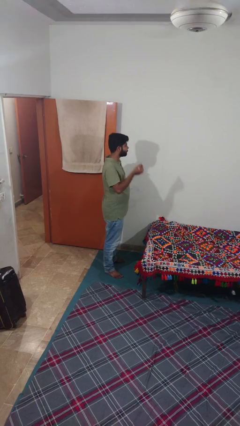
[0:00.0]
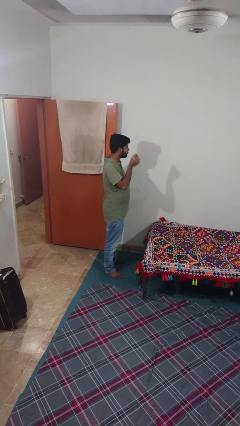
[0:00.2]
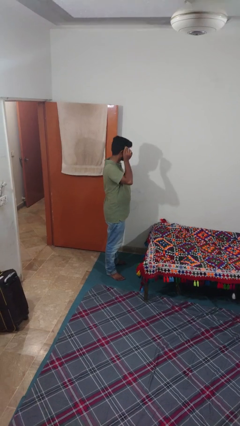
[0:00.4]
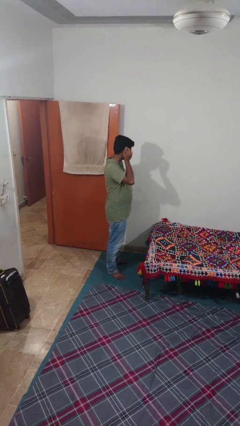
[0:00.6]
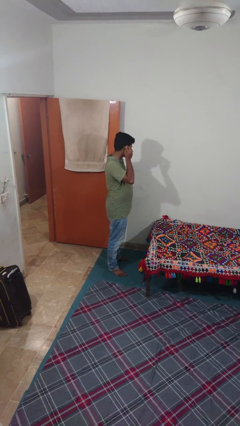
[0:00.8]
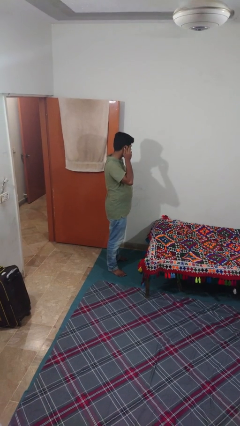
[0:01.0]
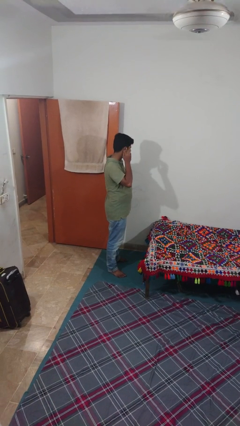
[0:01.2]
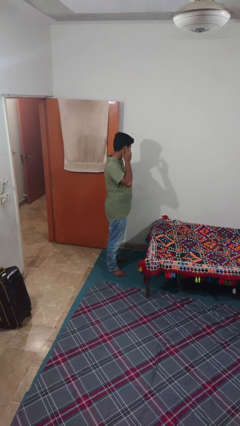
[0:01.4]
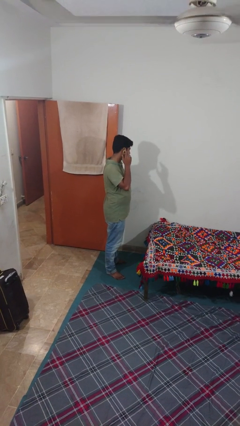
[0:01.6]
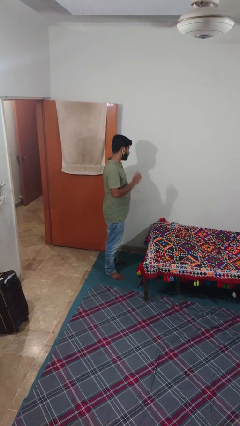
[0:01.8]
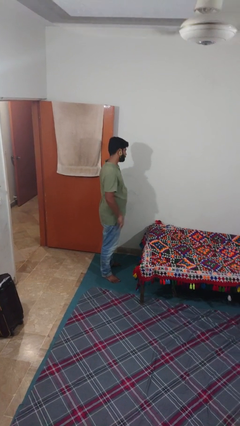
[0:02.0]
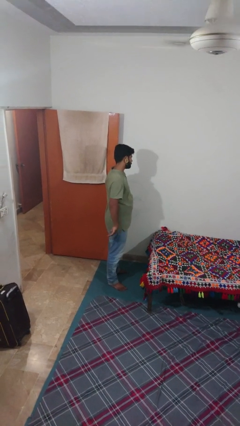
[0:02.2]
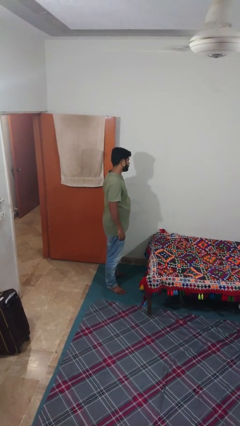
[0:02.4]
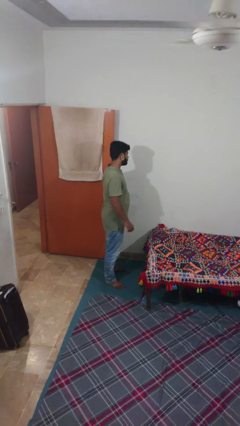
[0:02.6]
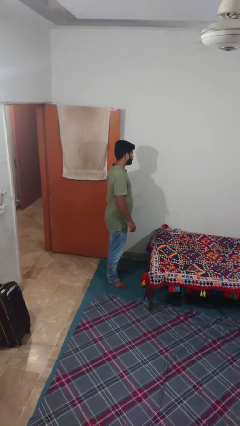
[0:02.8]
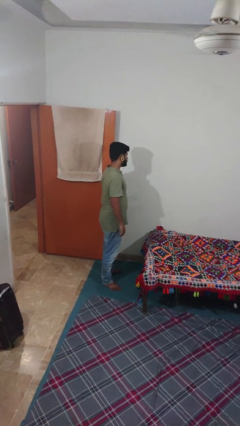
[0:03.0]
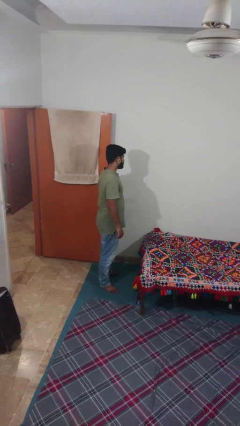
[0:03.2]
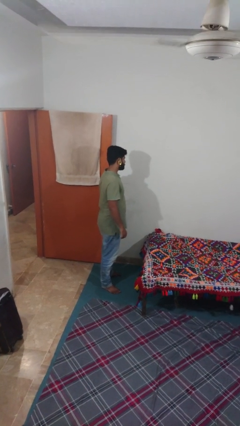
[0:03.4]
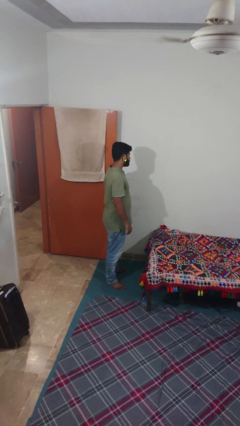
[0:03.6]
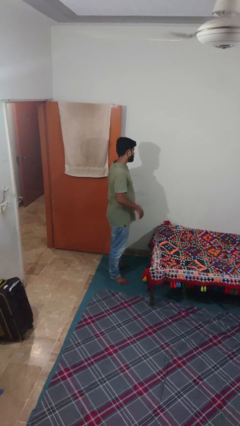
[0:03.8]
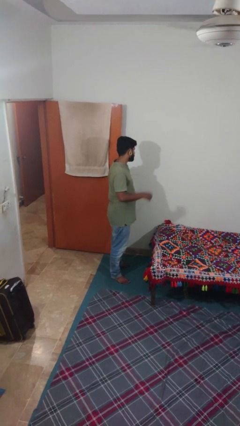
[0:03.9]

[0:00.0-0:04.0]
person puts on earrings

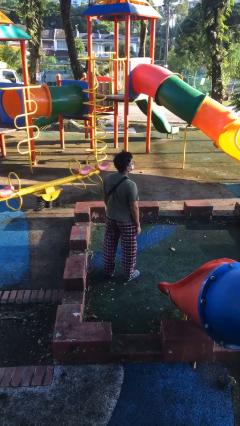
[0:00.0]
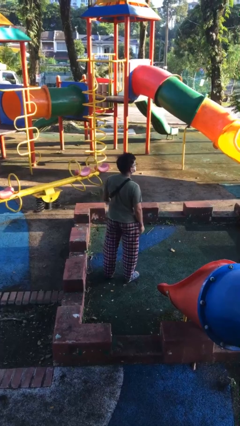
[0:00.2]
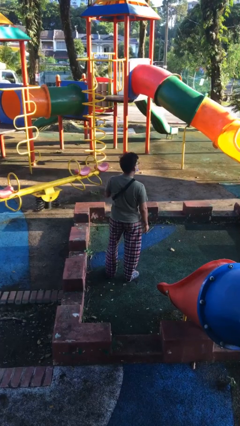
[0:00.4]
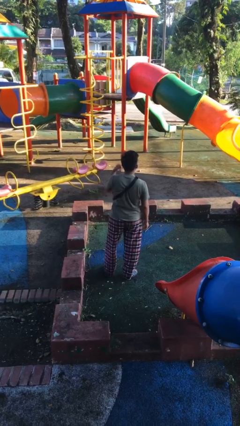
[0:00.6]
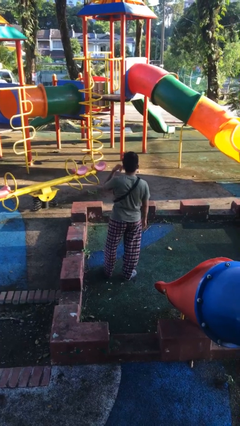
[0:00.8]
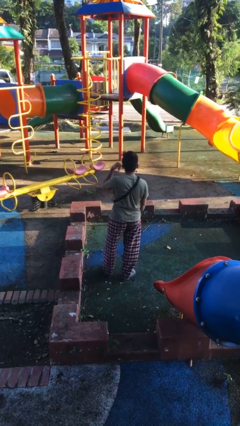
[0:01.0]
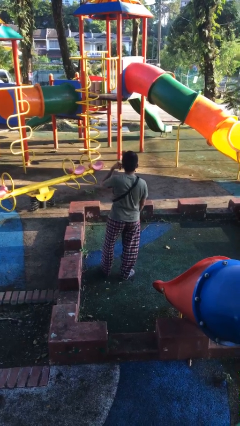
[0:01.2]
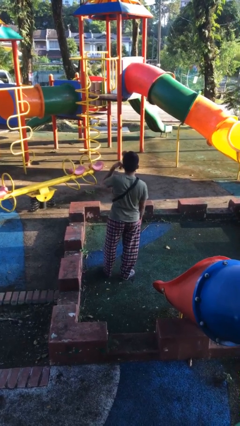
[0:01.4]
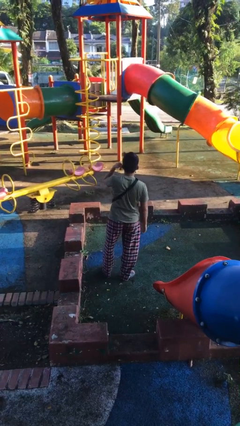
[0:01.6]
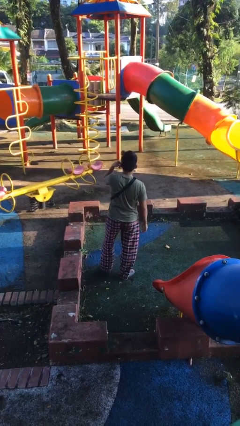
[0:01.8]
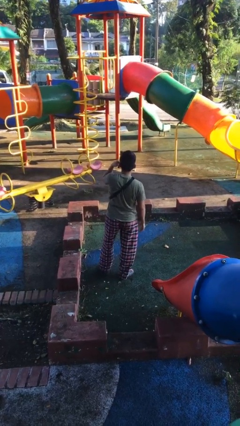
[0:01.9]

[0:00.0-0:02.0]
person gestures call me

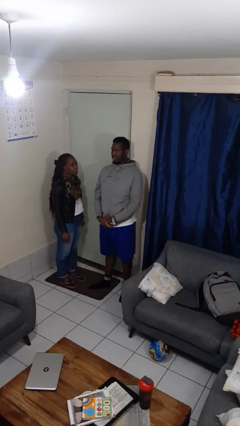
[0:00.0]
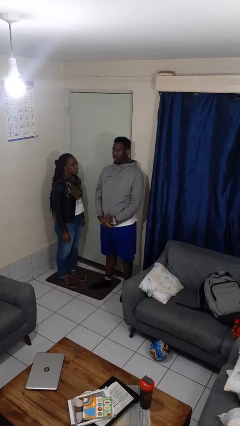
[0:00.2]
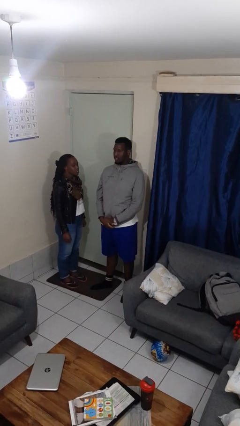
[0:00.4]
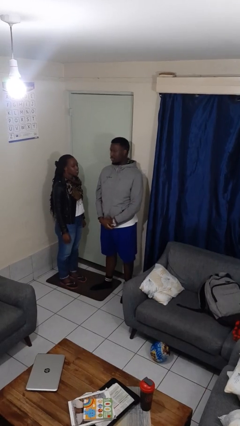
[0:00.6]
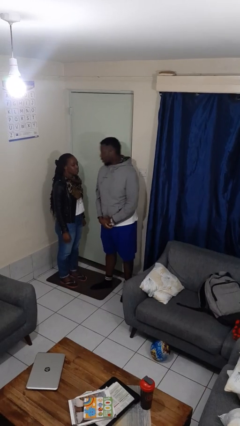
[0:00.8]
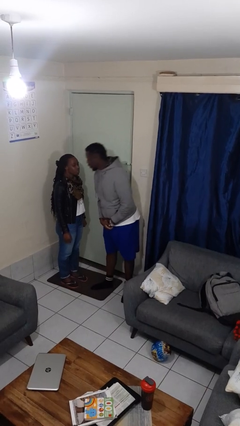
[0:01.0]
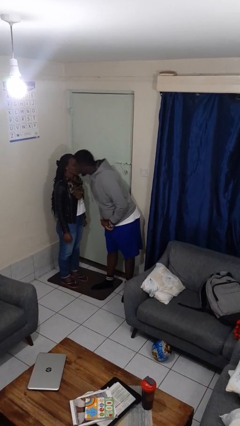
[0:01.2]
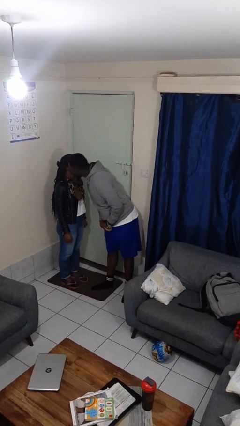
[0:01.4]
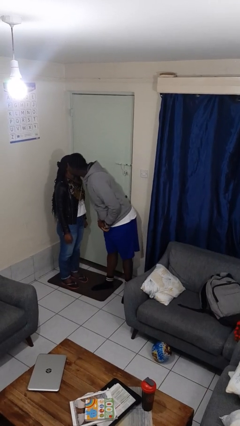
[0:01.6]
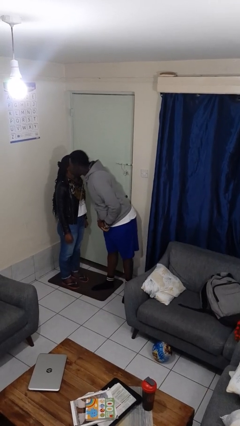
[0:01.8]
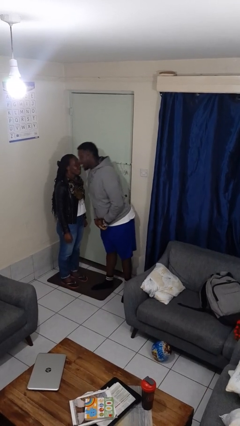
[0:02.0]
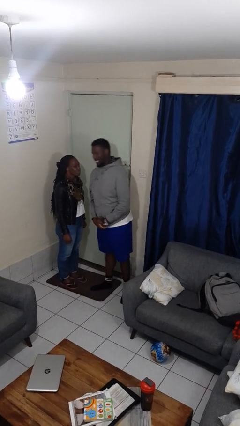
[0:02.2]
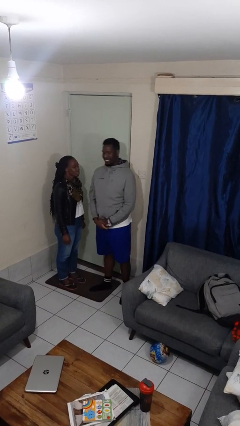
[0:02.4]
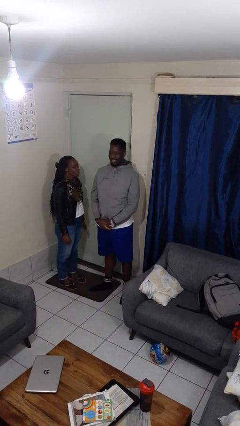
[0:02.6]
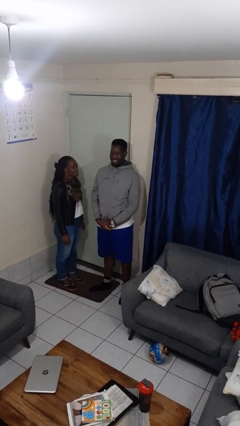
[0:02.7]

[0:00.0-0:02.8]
person kisses cheek of person

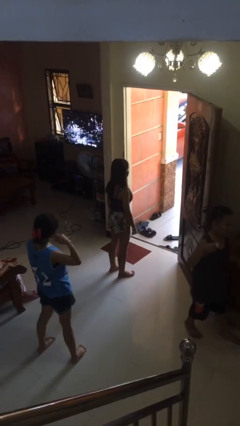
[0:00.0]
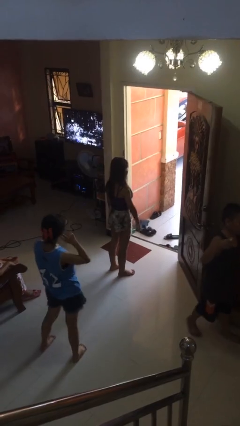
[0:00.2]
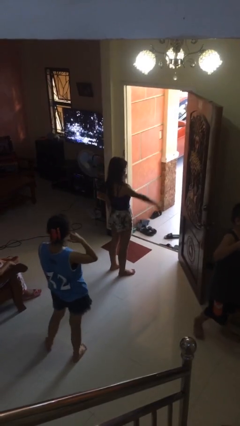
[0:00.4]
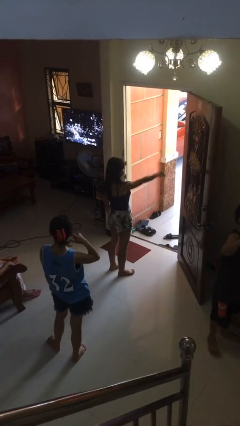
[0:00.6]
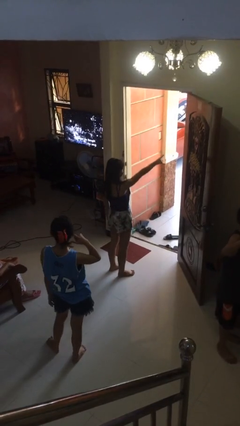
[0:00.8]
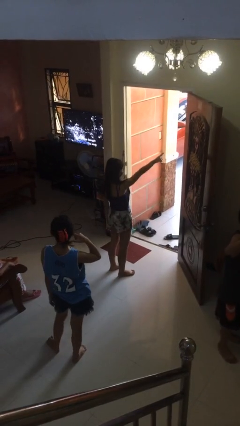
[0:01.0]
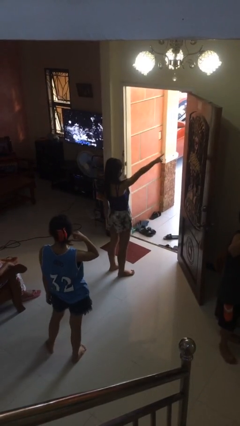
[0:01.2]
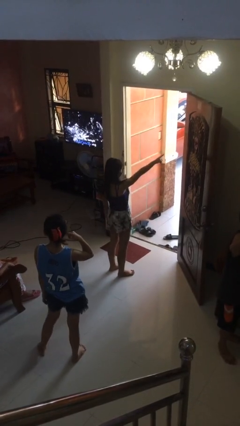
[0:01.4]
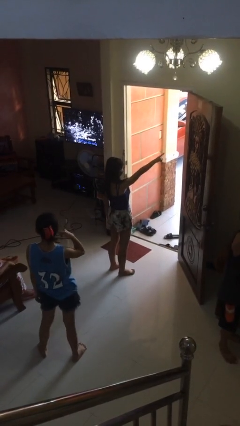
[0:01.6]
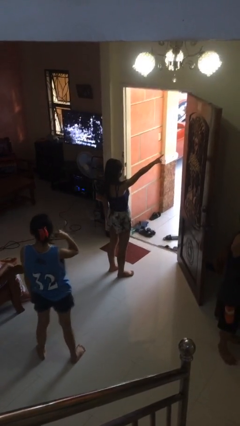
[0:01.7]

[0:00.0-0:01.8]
person points at person

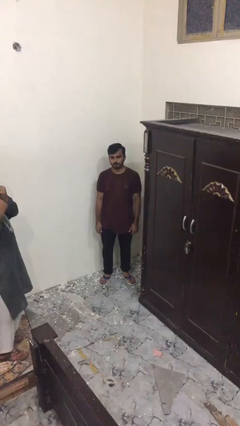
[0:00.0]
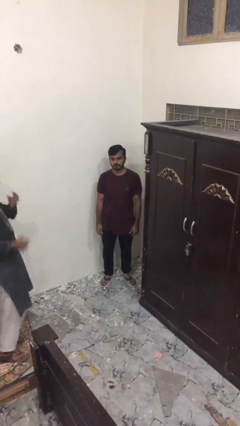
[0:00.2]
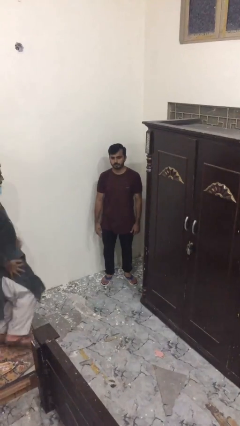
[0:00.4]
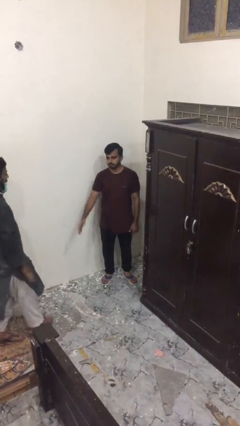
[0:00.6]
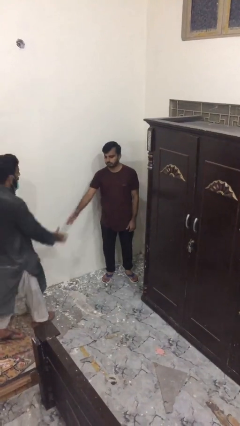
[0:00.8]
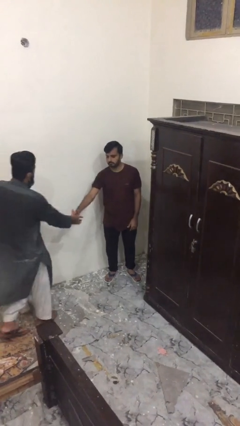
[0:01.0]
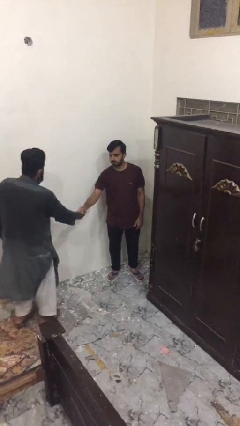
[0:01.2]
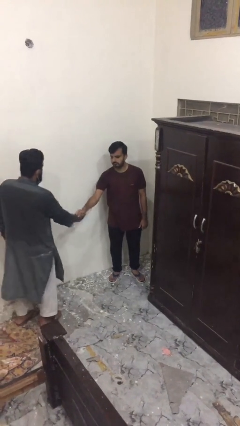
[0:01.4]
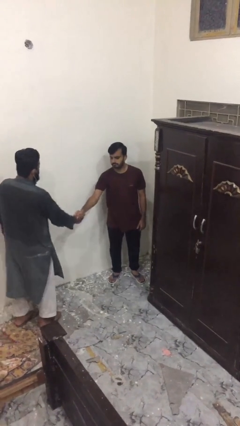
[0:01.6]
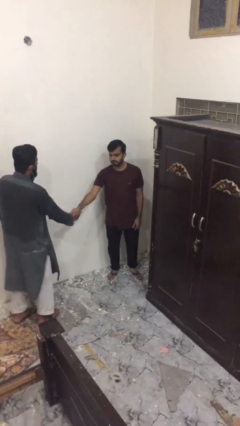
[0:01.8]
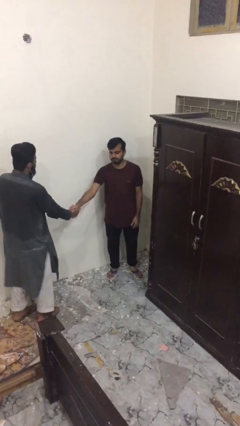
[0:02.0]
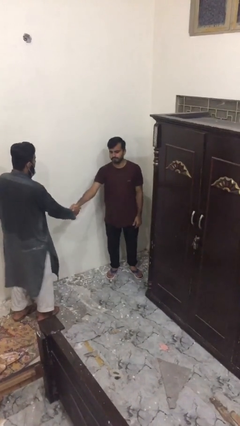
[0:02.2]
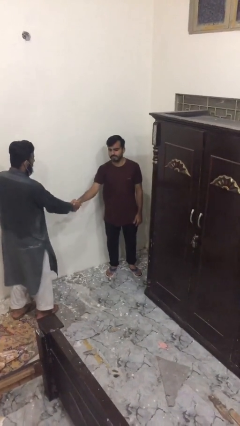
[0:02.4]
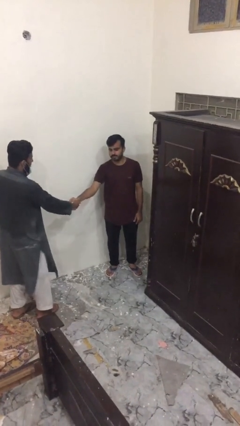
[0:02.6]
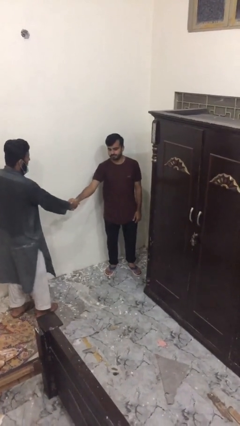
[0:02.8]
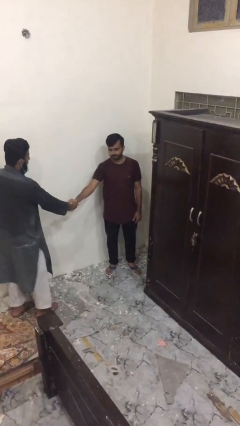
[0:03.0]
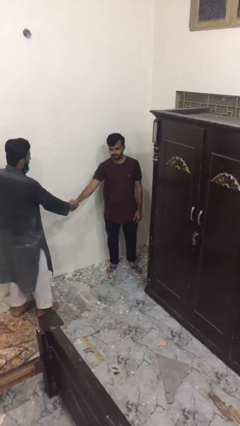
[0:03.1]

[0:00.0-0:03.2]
person shakes hand

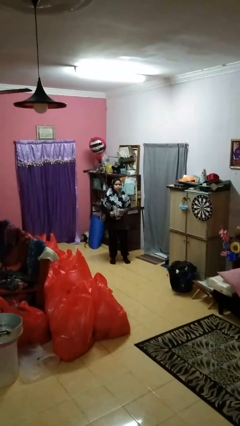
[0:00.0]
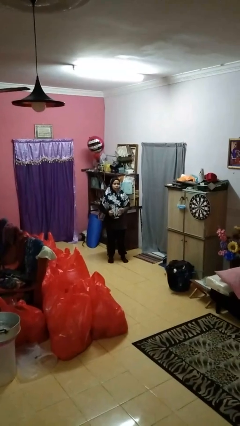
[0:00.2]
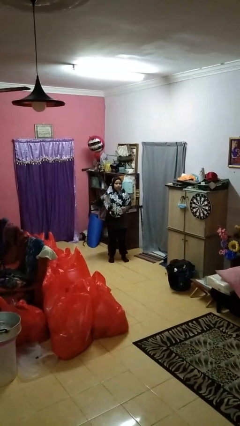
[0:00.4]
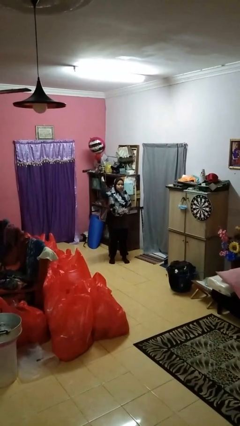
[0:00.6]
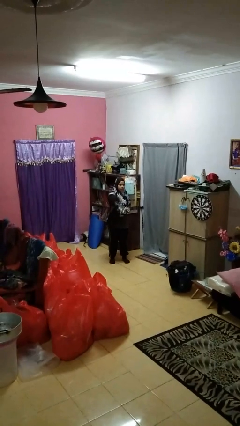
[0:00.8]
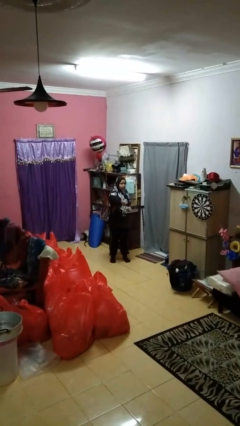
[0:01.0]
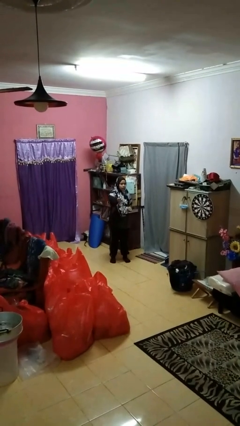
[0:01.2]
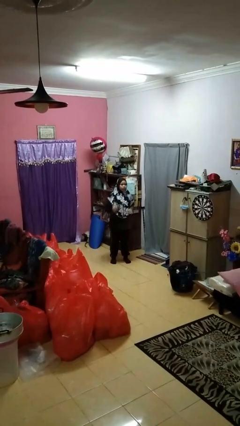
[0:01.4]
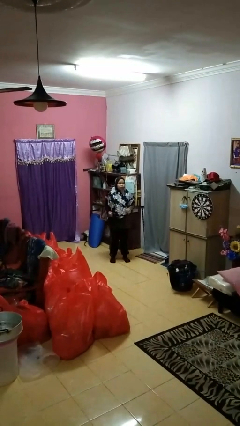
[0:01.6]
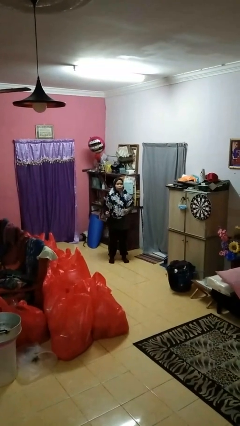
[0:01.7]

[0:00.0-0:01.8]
person karate chop

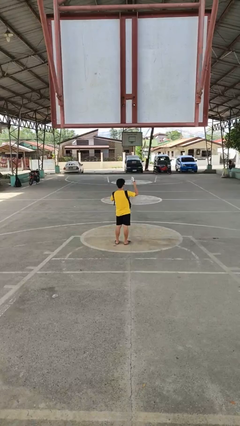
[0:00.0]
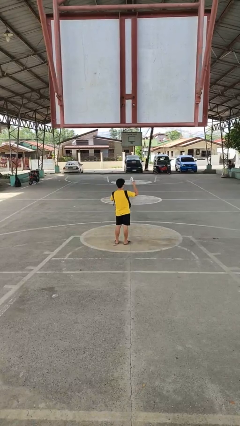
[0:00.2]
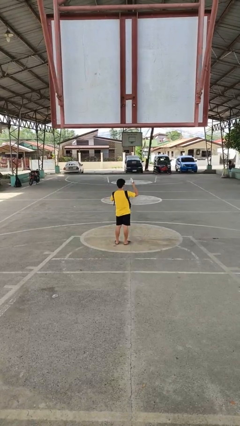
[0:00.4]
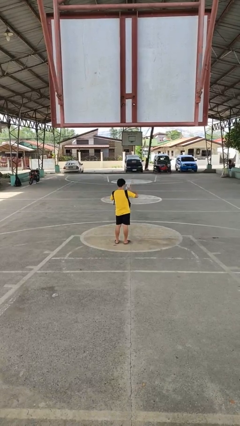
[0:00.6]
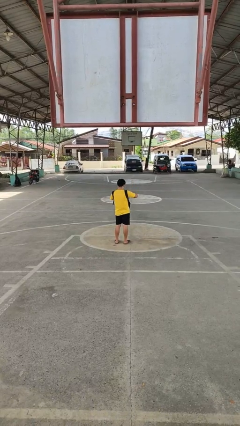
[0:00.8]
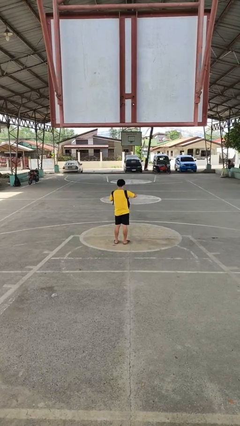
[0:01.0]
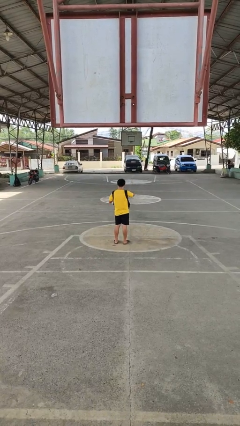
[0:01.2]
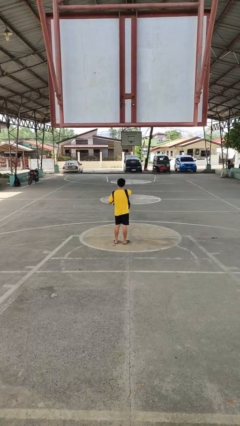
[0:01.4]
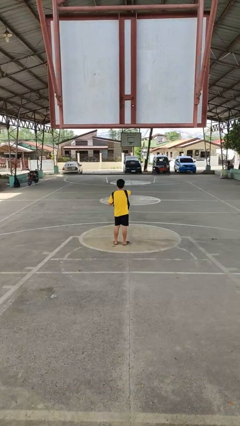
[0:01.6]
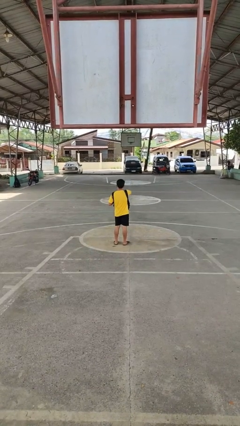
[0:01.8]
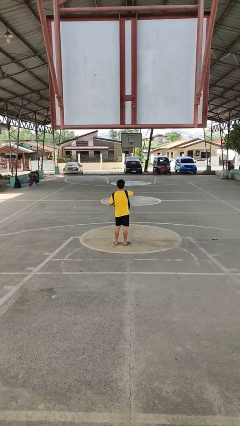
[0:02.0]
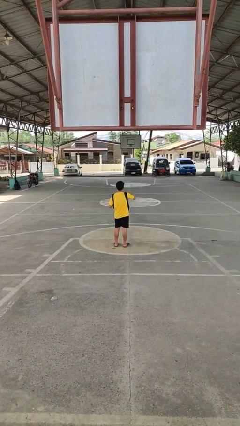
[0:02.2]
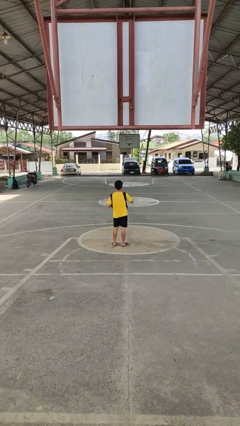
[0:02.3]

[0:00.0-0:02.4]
person puts object into backpack
